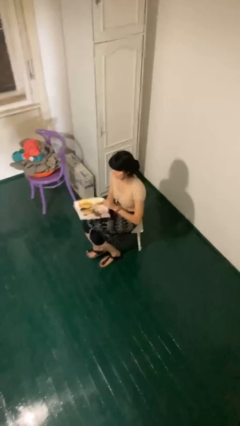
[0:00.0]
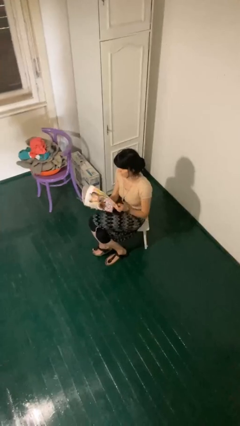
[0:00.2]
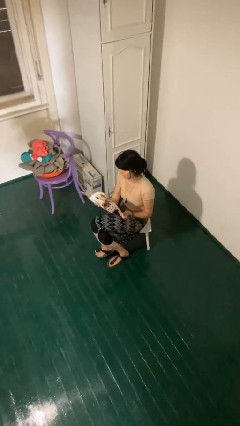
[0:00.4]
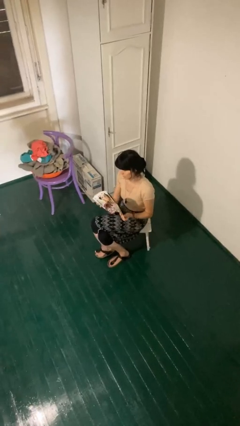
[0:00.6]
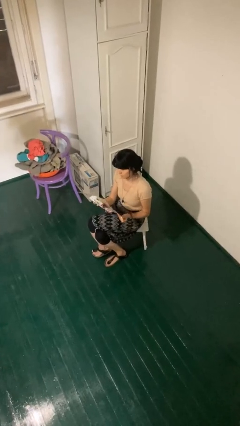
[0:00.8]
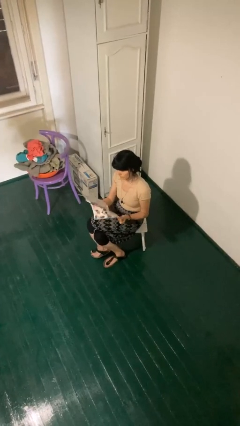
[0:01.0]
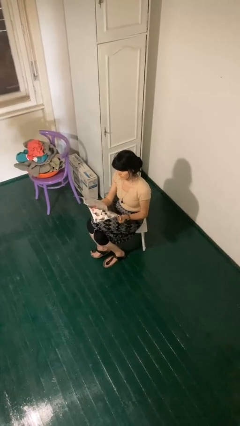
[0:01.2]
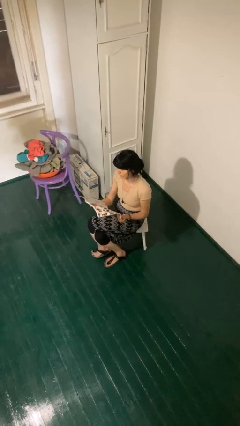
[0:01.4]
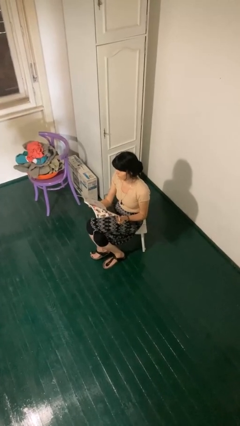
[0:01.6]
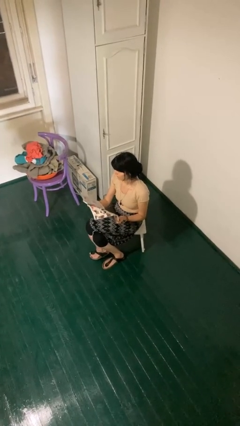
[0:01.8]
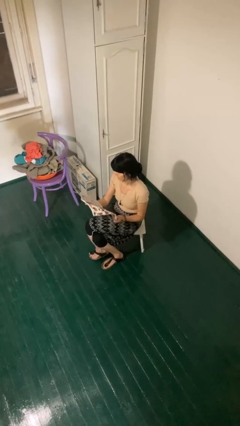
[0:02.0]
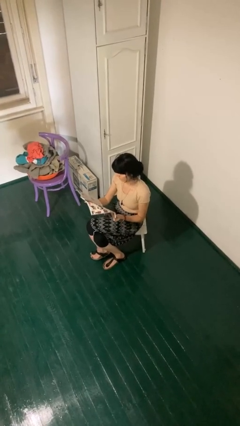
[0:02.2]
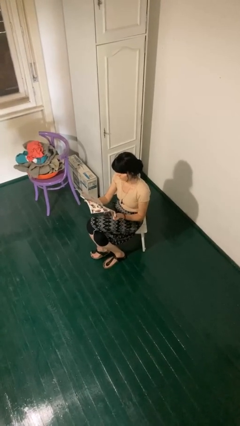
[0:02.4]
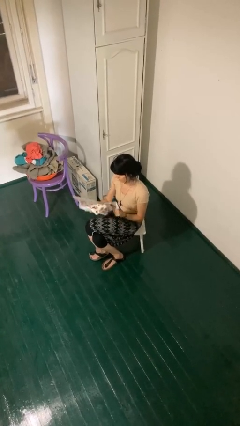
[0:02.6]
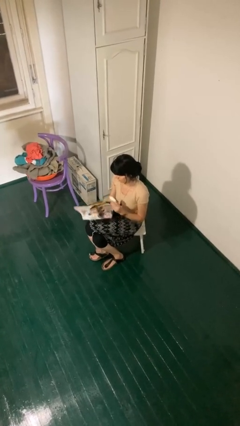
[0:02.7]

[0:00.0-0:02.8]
person reads magazine

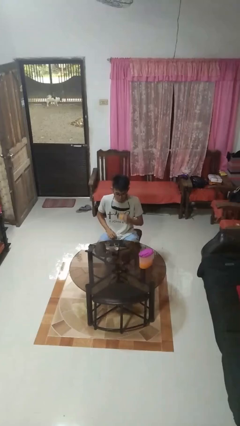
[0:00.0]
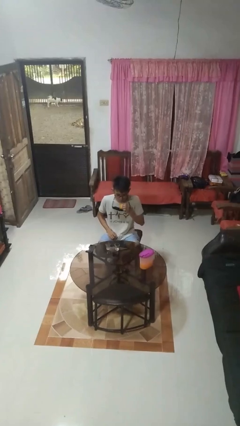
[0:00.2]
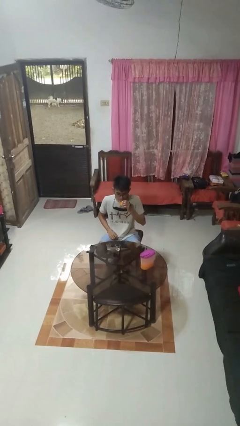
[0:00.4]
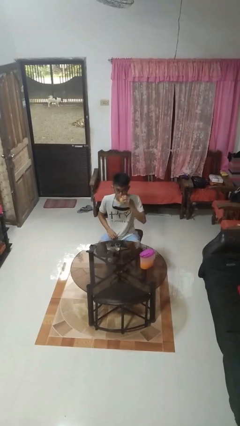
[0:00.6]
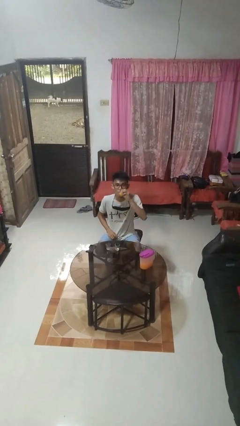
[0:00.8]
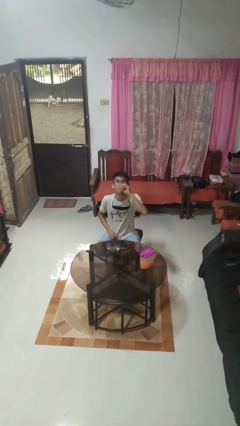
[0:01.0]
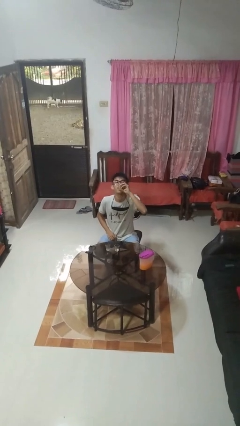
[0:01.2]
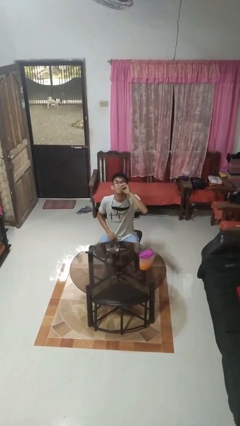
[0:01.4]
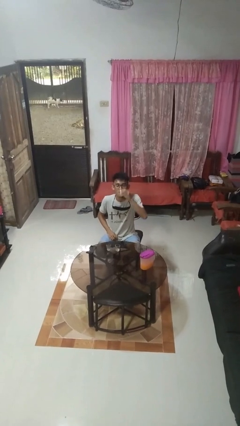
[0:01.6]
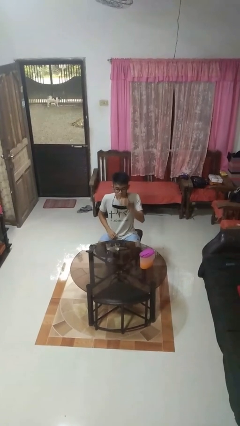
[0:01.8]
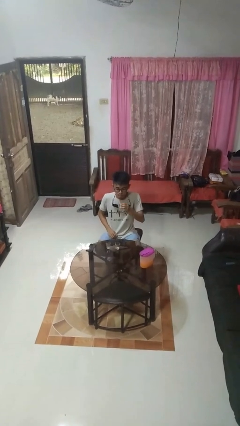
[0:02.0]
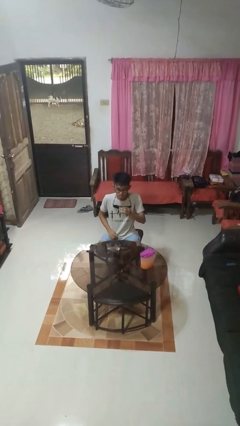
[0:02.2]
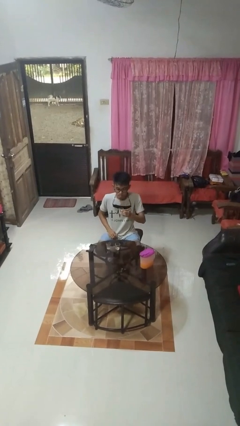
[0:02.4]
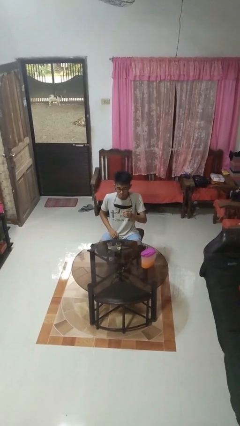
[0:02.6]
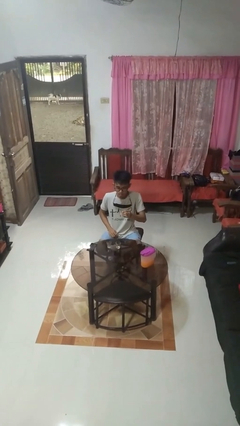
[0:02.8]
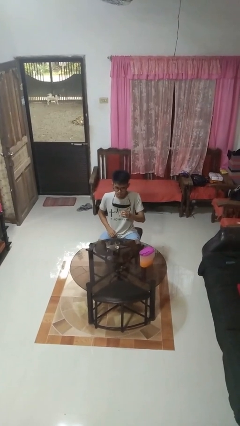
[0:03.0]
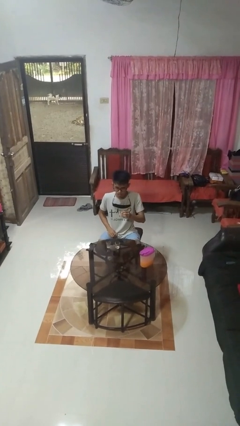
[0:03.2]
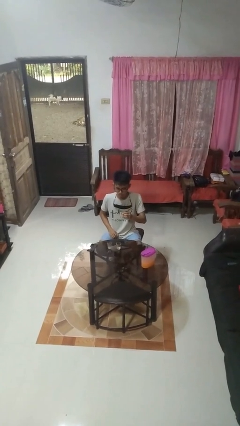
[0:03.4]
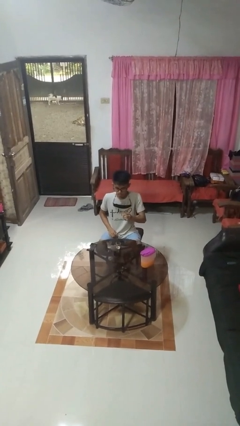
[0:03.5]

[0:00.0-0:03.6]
person drinks from shotglass

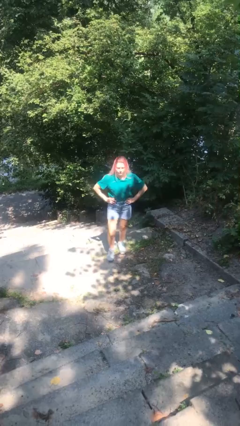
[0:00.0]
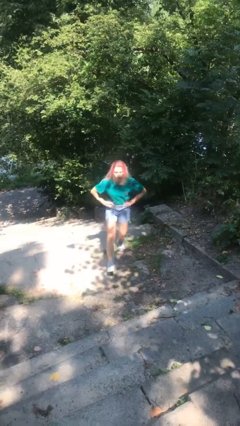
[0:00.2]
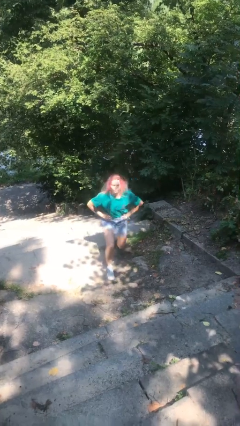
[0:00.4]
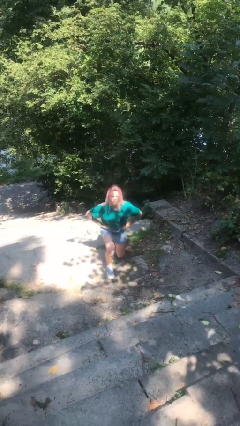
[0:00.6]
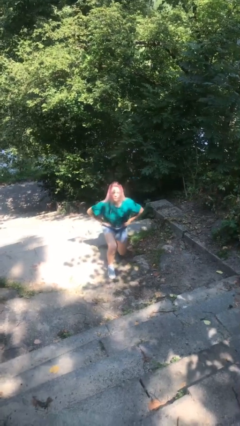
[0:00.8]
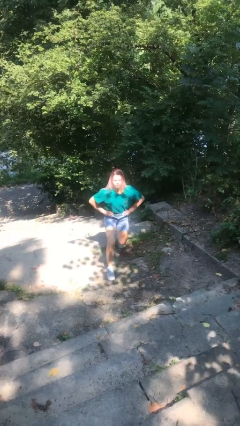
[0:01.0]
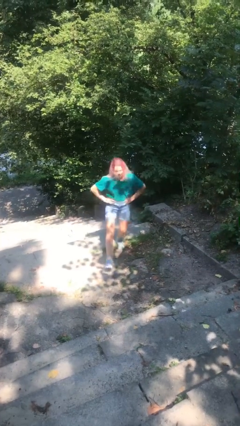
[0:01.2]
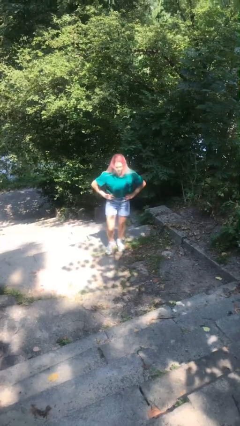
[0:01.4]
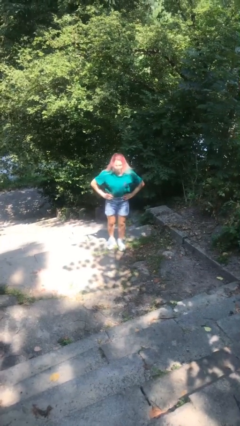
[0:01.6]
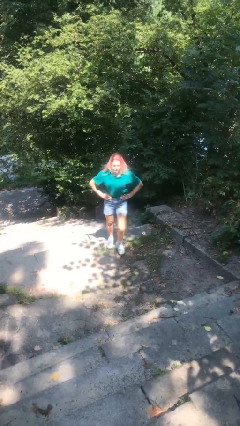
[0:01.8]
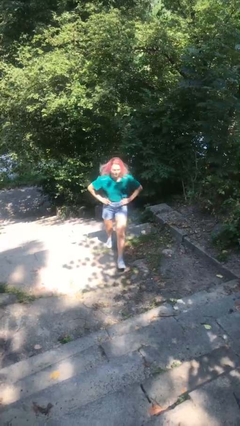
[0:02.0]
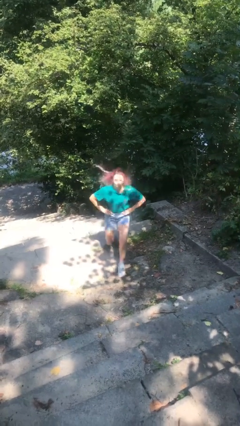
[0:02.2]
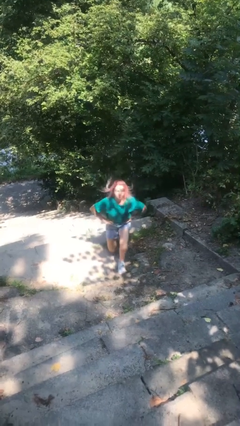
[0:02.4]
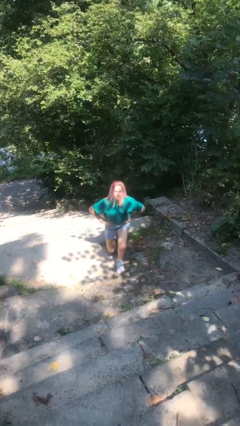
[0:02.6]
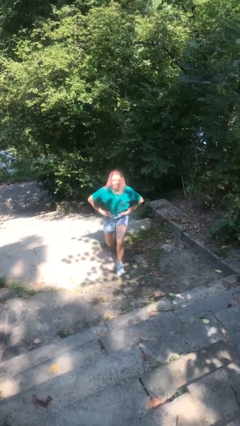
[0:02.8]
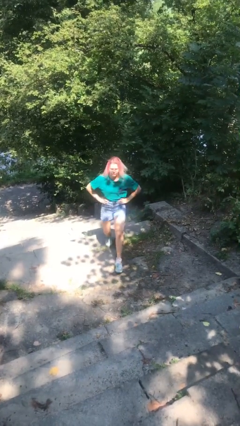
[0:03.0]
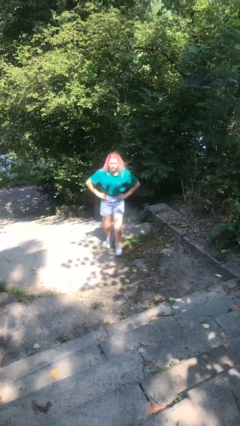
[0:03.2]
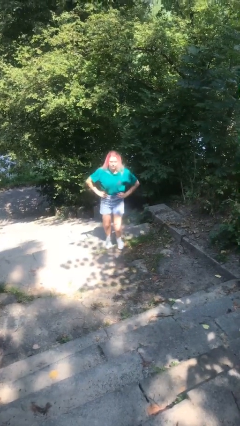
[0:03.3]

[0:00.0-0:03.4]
person exercises with lunges

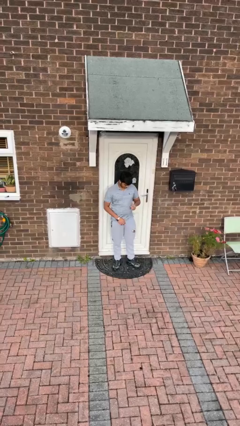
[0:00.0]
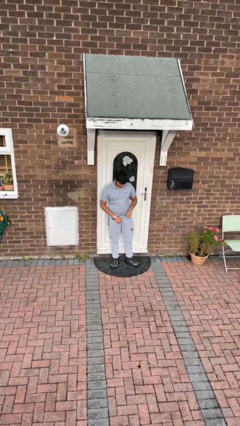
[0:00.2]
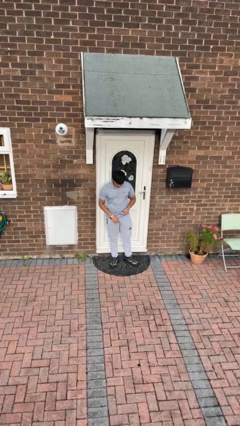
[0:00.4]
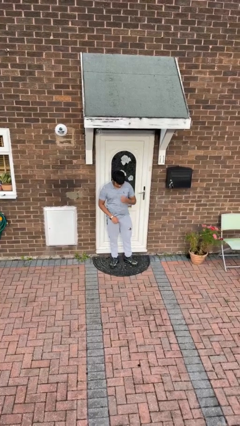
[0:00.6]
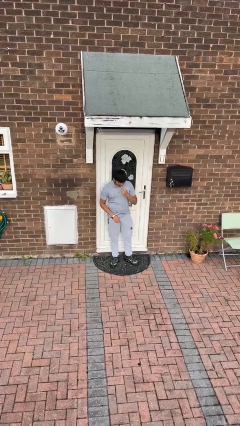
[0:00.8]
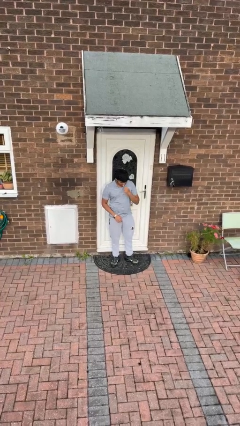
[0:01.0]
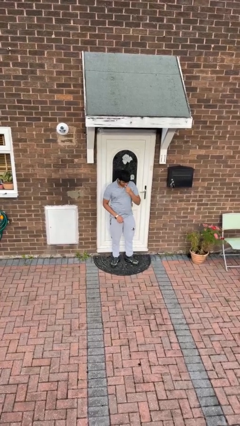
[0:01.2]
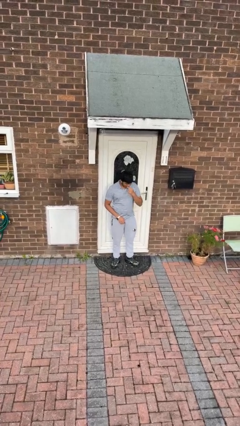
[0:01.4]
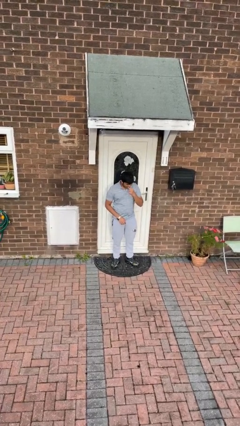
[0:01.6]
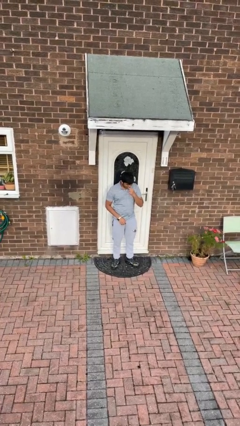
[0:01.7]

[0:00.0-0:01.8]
person flosses

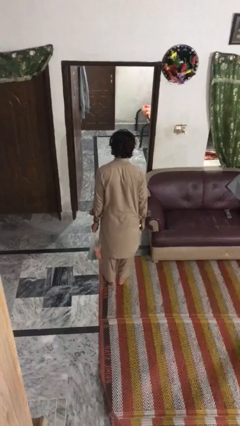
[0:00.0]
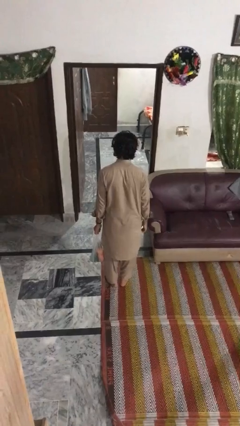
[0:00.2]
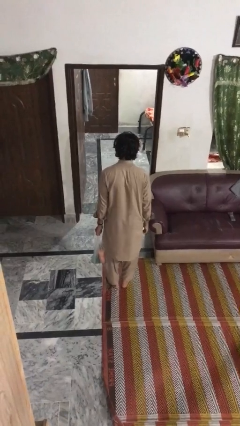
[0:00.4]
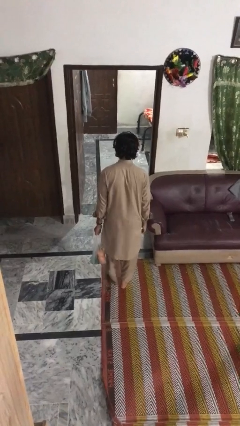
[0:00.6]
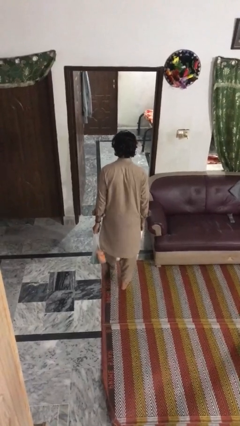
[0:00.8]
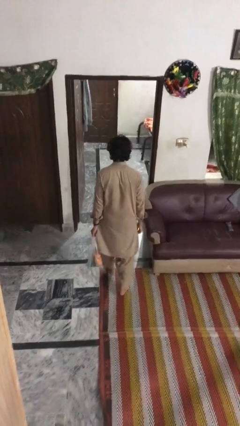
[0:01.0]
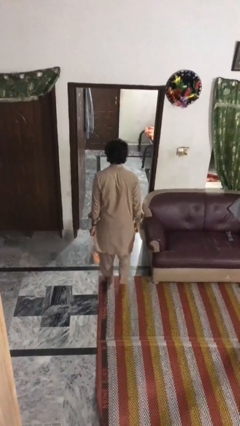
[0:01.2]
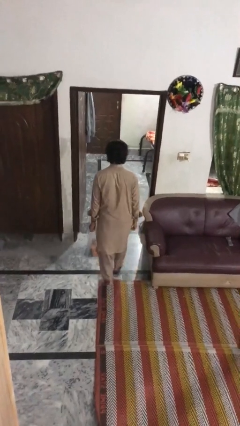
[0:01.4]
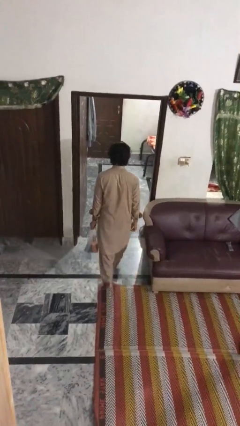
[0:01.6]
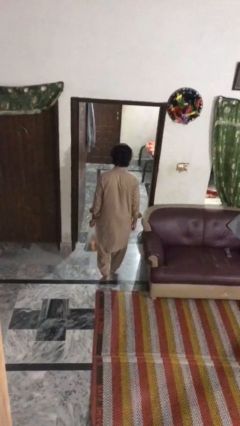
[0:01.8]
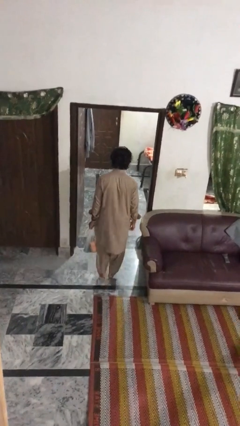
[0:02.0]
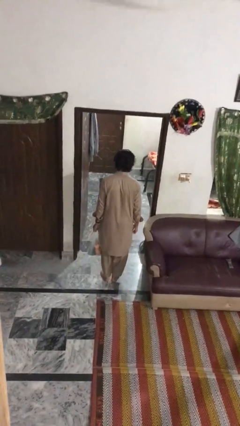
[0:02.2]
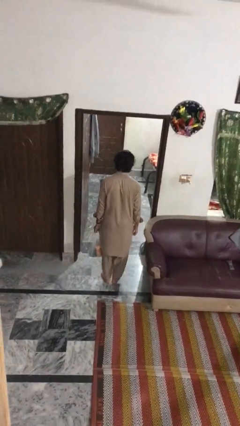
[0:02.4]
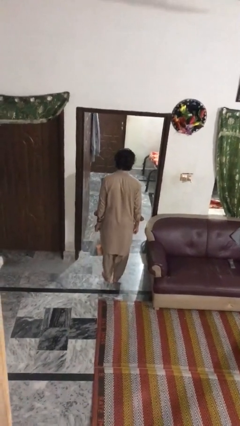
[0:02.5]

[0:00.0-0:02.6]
person carries groceries

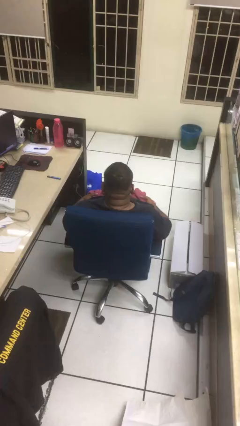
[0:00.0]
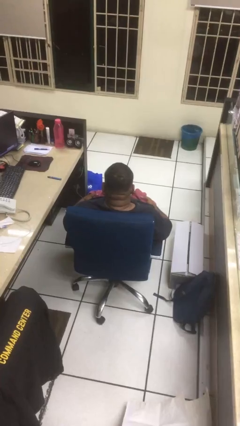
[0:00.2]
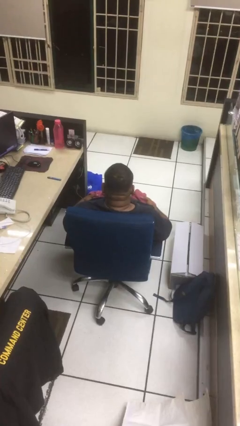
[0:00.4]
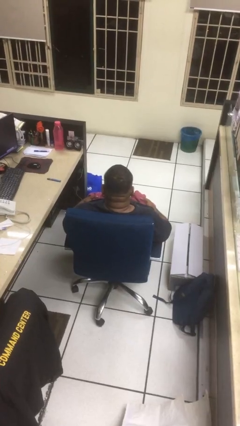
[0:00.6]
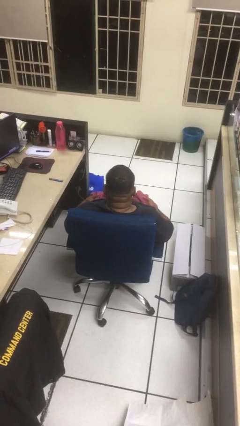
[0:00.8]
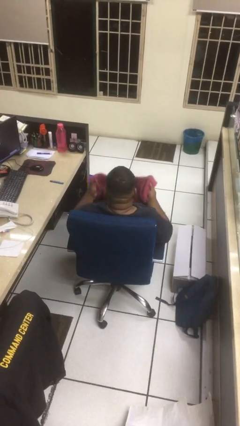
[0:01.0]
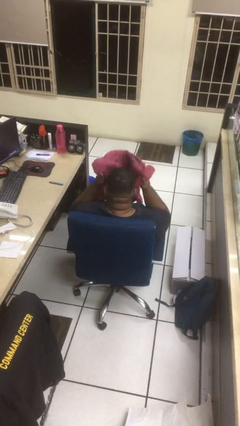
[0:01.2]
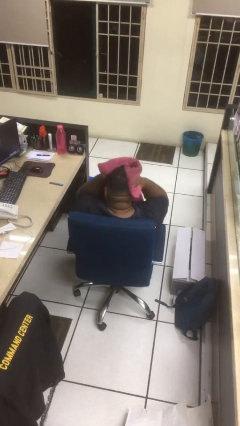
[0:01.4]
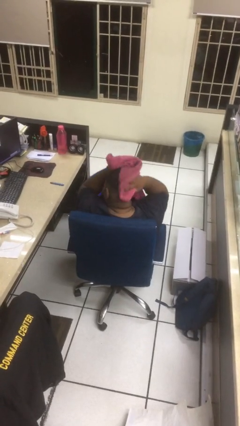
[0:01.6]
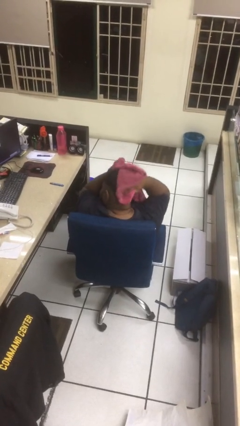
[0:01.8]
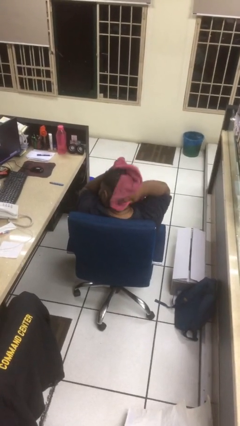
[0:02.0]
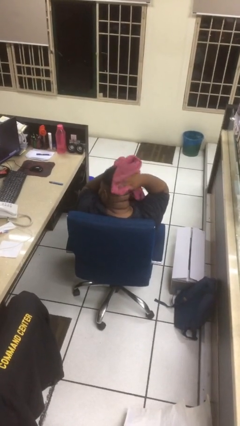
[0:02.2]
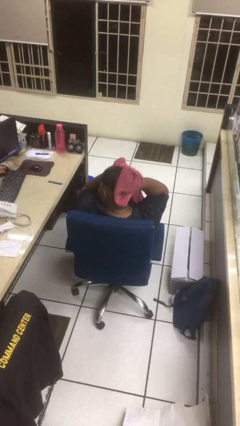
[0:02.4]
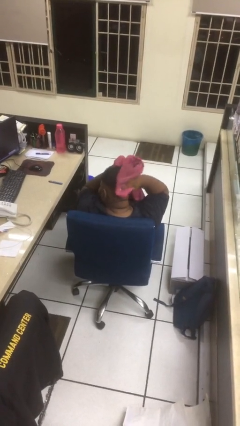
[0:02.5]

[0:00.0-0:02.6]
person dries hair with towel

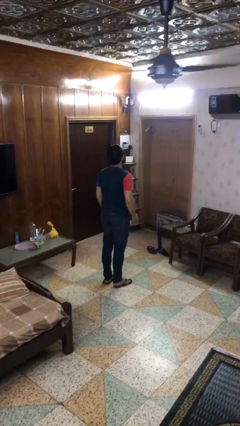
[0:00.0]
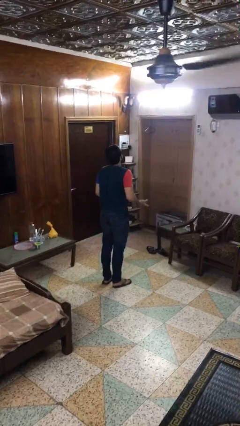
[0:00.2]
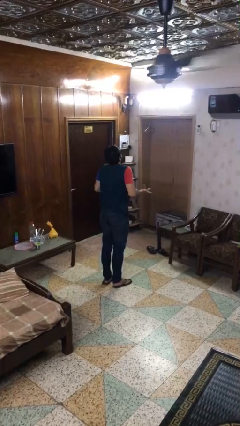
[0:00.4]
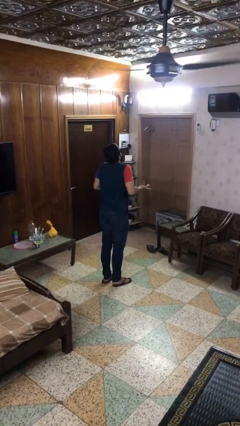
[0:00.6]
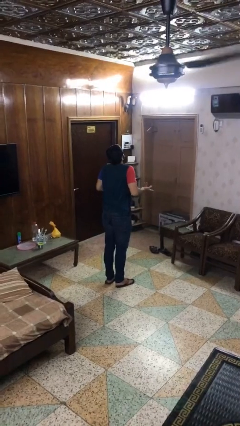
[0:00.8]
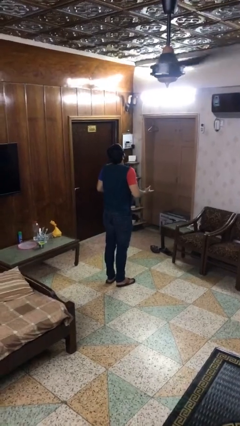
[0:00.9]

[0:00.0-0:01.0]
person shrugs
